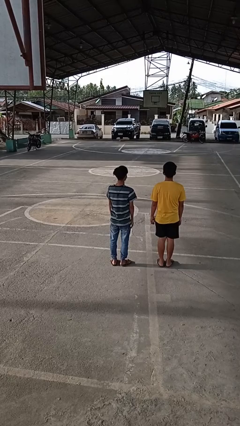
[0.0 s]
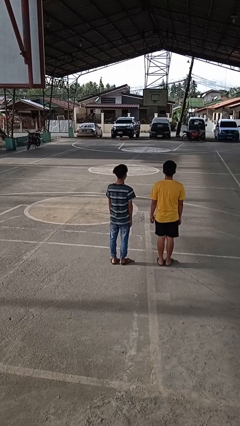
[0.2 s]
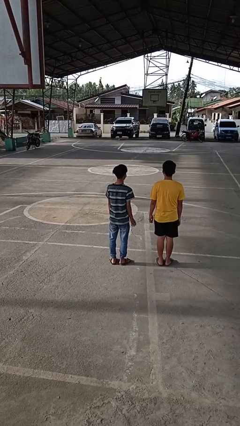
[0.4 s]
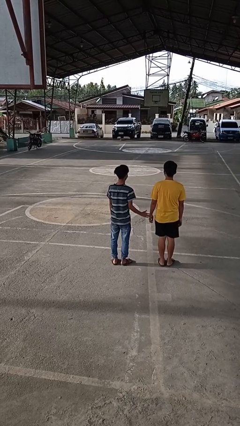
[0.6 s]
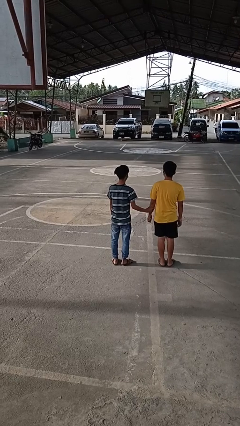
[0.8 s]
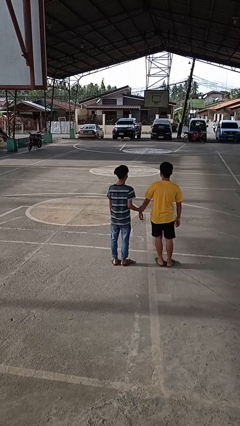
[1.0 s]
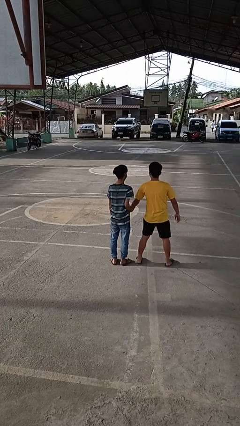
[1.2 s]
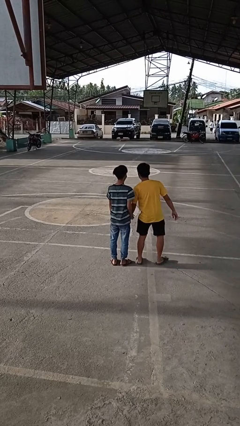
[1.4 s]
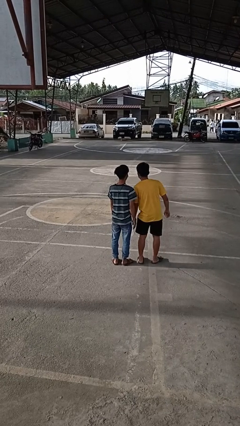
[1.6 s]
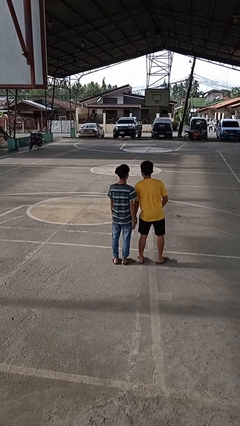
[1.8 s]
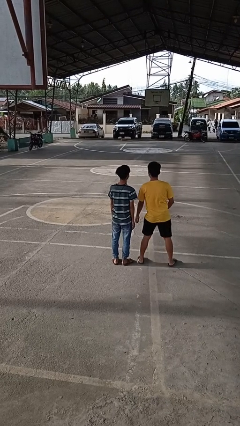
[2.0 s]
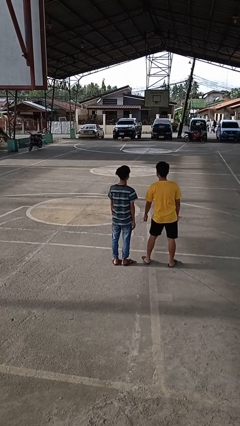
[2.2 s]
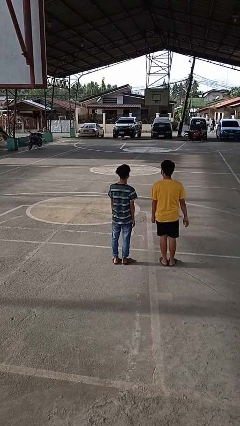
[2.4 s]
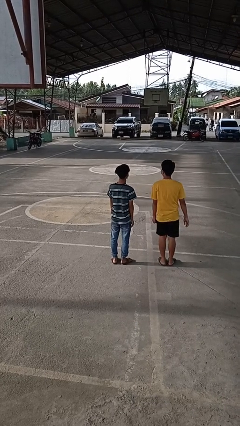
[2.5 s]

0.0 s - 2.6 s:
person grabs person by forearm

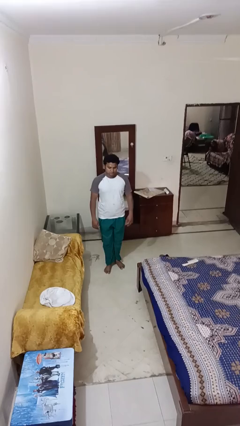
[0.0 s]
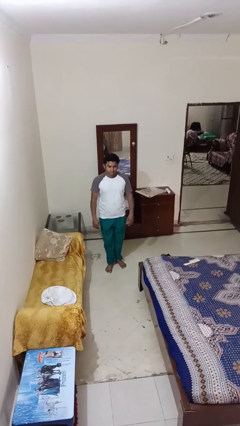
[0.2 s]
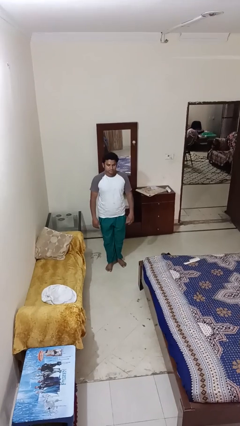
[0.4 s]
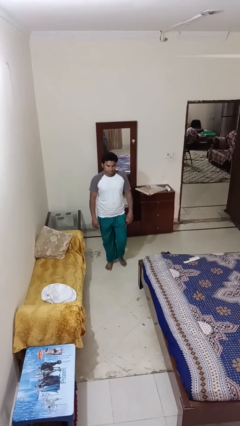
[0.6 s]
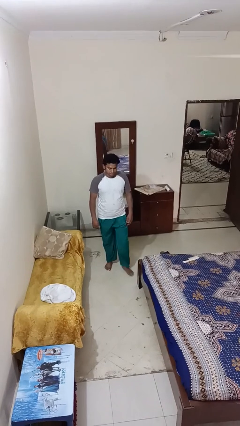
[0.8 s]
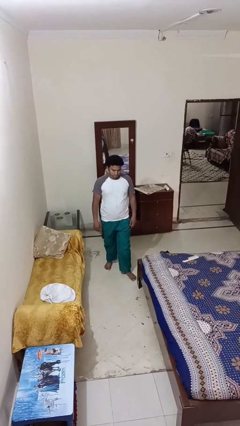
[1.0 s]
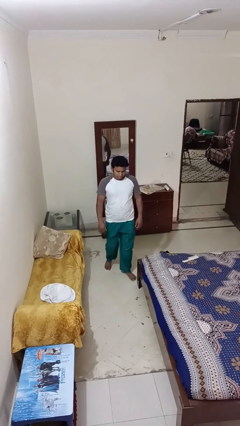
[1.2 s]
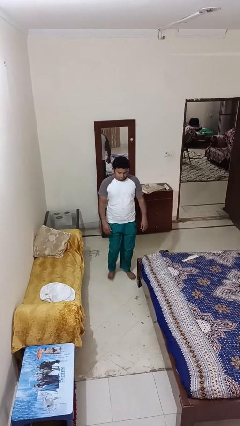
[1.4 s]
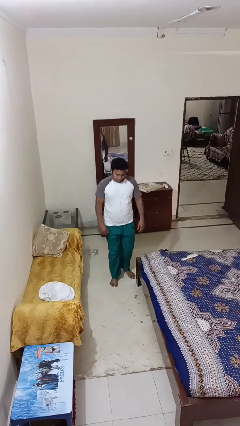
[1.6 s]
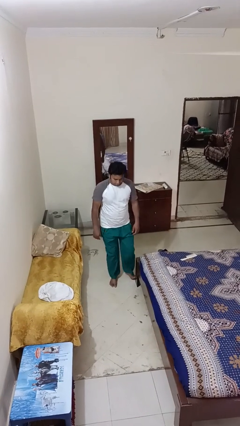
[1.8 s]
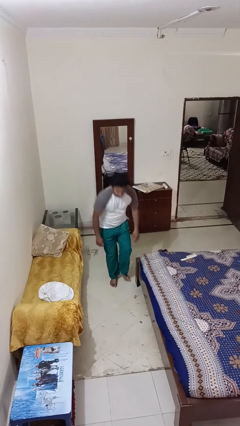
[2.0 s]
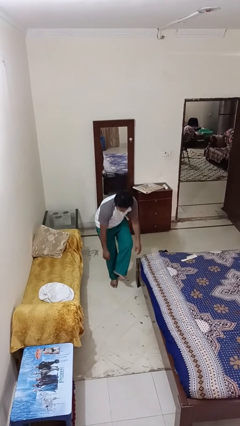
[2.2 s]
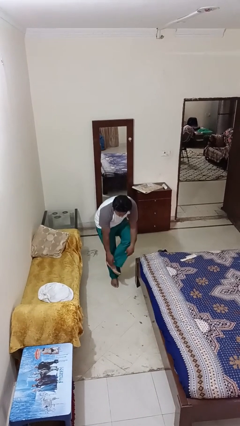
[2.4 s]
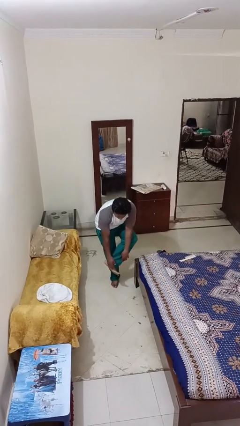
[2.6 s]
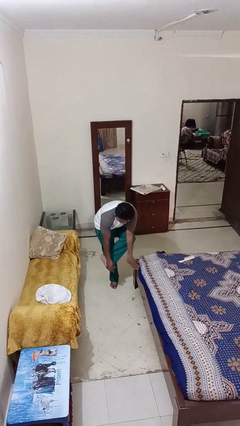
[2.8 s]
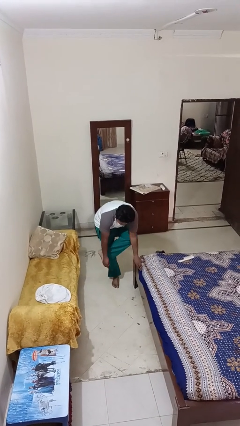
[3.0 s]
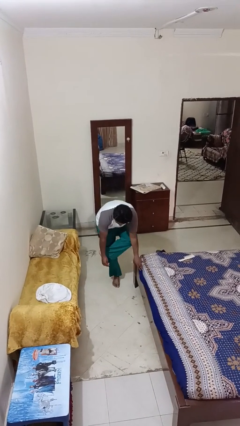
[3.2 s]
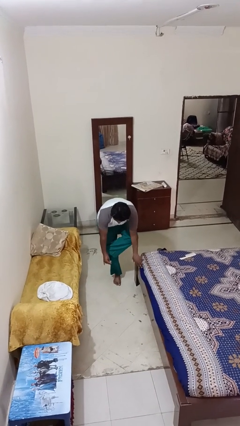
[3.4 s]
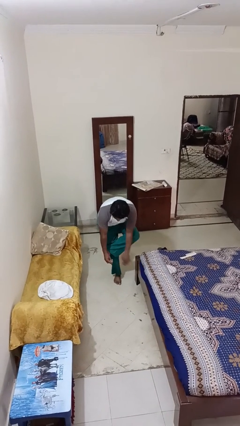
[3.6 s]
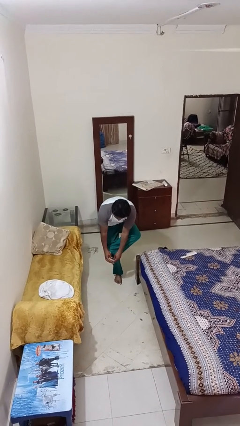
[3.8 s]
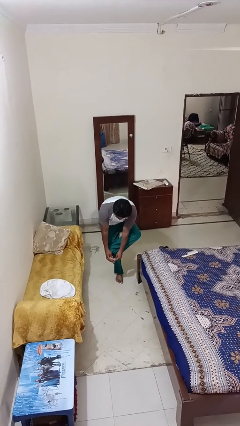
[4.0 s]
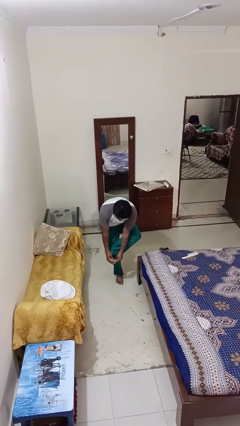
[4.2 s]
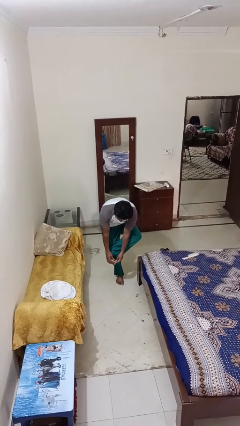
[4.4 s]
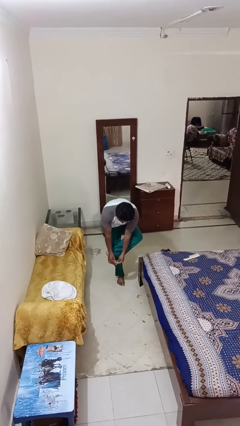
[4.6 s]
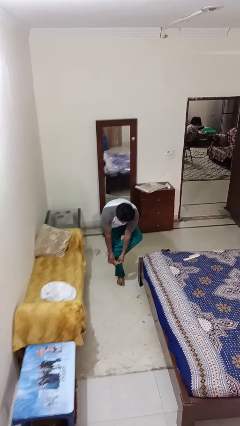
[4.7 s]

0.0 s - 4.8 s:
person stubs toe

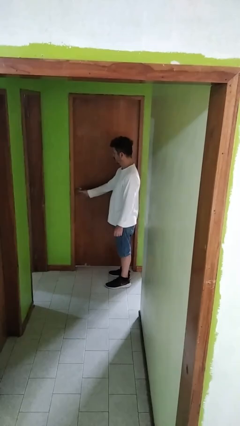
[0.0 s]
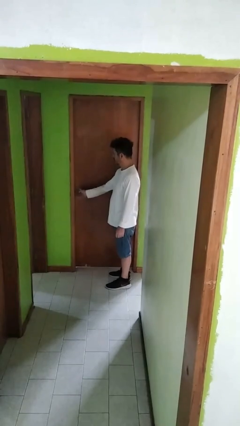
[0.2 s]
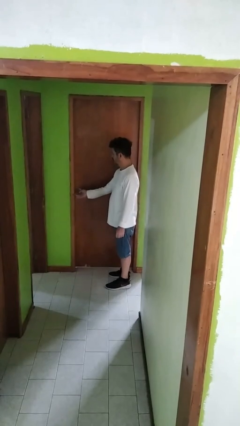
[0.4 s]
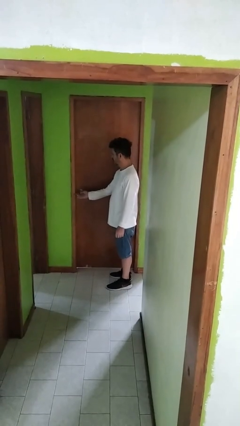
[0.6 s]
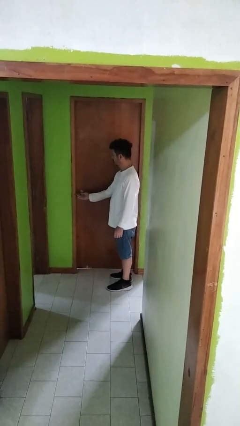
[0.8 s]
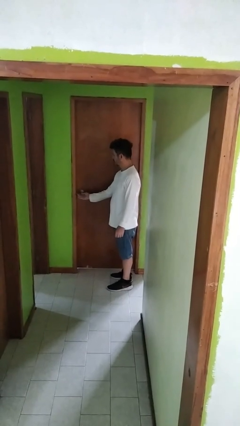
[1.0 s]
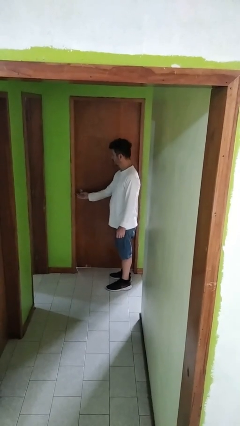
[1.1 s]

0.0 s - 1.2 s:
person unlocks door with keys

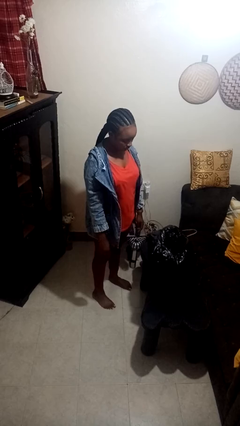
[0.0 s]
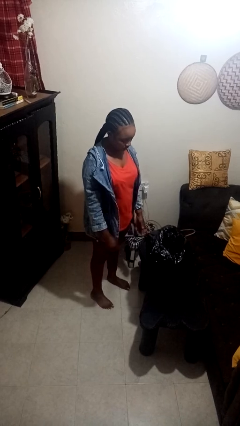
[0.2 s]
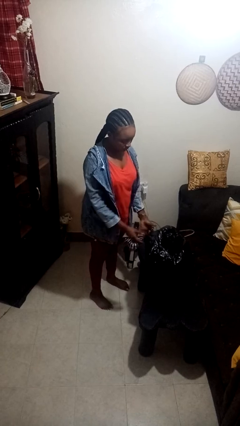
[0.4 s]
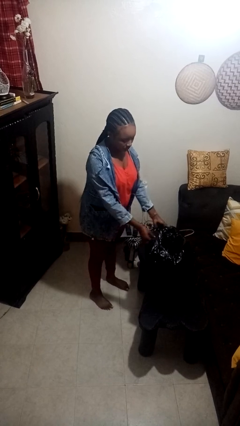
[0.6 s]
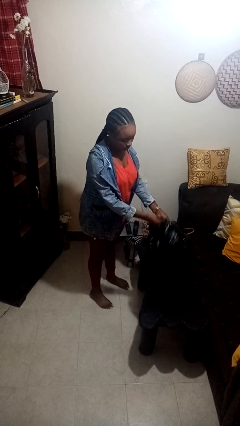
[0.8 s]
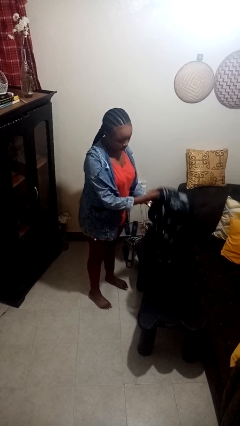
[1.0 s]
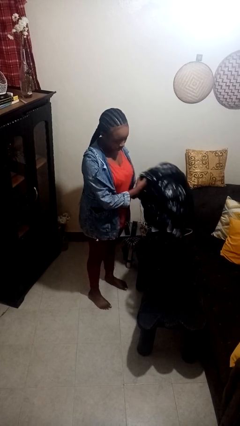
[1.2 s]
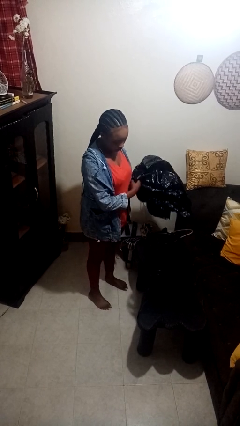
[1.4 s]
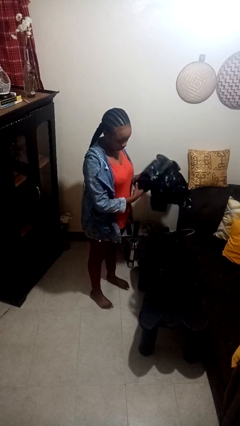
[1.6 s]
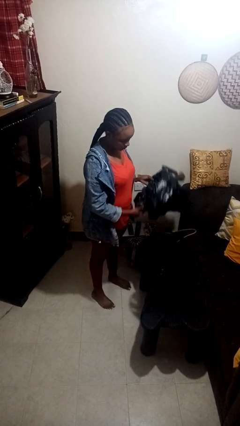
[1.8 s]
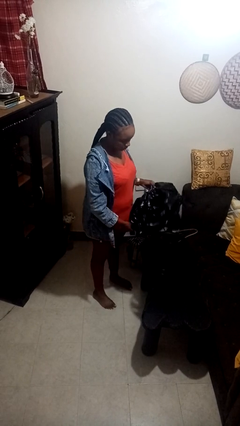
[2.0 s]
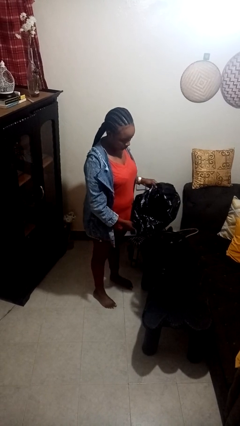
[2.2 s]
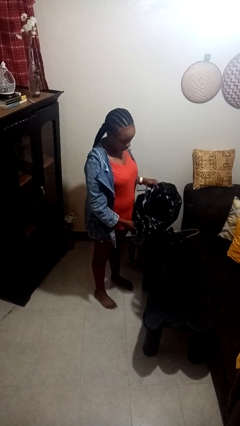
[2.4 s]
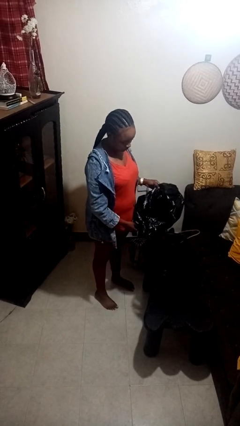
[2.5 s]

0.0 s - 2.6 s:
person removes trashbag from trashcan

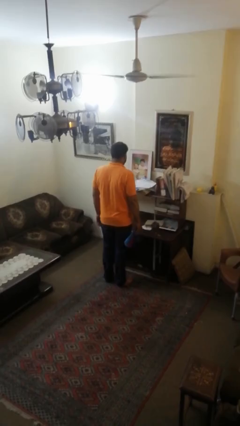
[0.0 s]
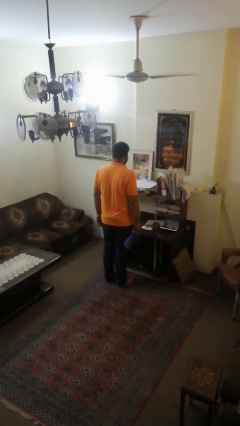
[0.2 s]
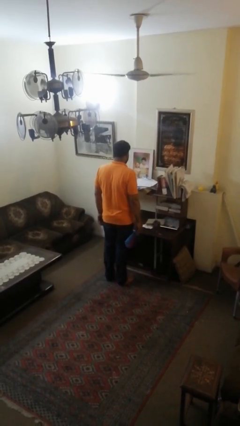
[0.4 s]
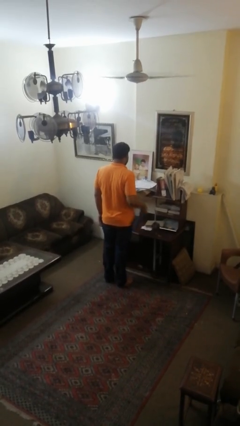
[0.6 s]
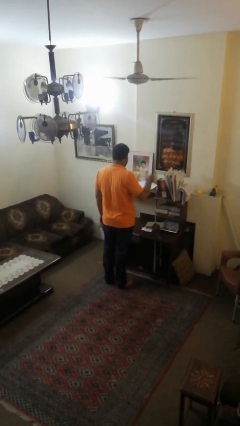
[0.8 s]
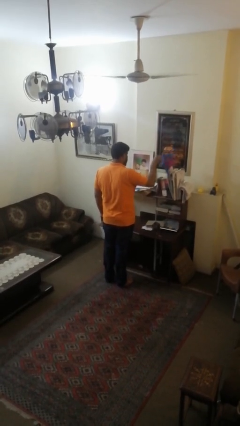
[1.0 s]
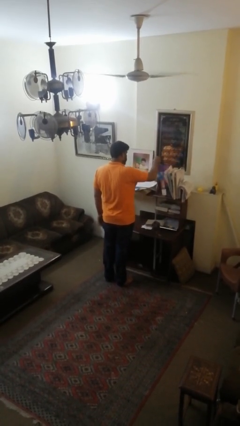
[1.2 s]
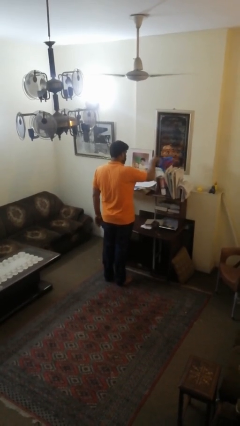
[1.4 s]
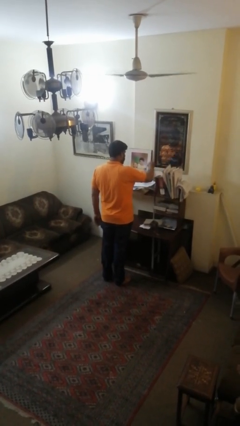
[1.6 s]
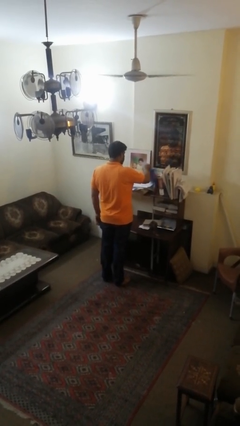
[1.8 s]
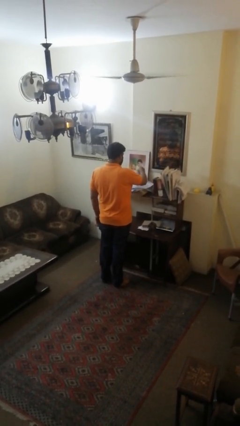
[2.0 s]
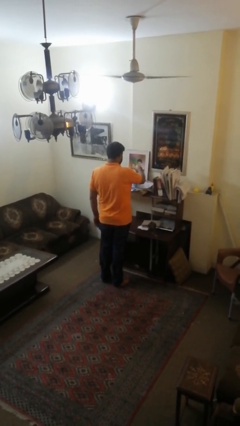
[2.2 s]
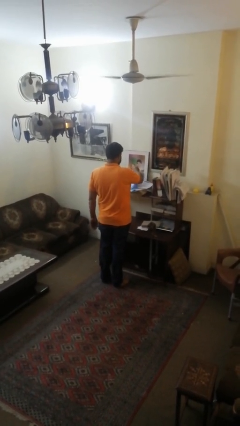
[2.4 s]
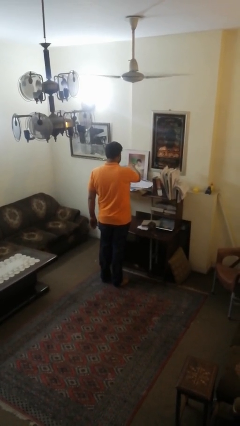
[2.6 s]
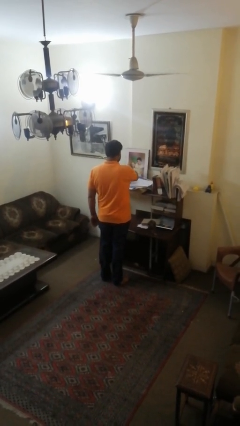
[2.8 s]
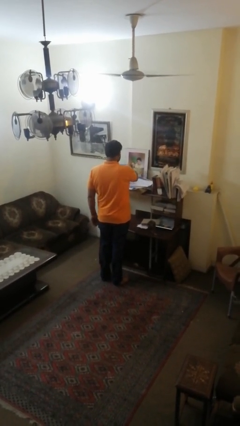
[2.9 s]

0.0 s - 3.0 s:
person dusts furniture

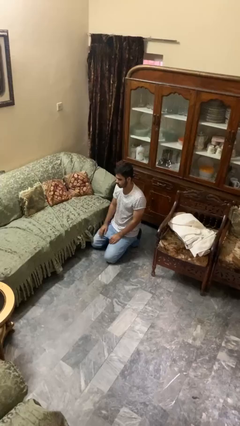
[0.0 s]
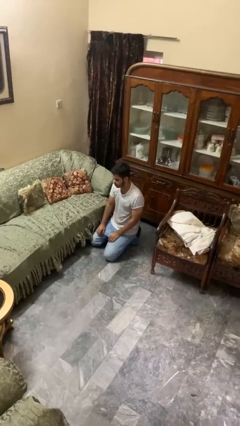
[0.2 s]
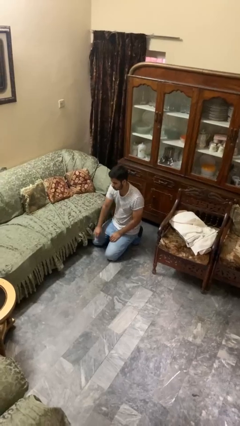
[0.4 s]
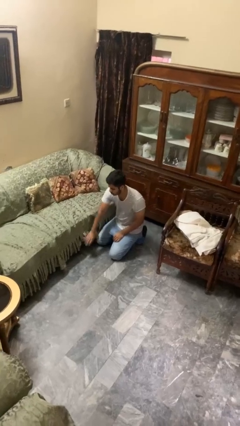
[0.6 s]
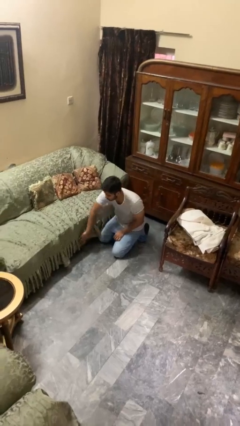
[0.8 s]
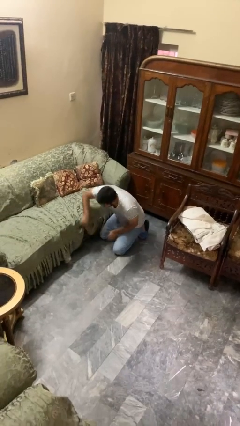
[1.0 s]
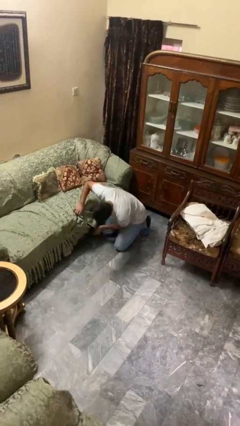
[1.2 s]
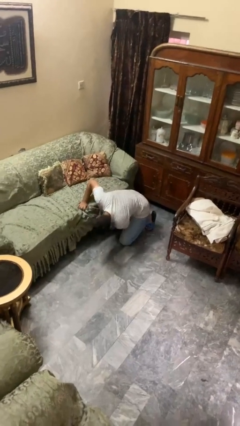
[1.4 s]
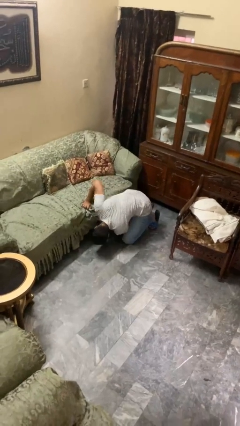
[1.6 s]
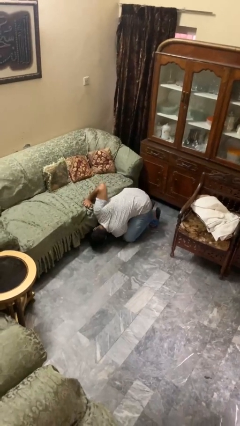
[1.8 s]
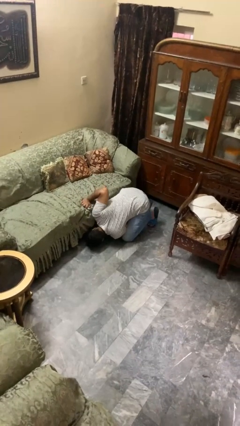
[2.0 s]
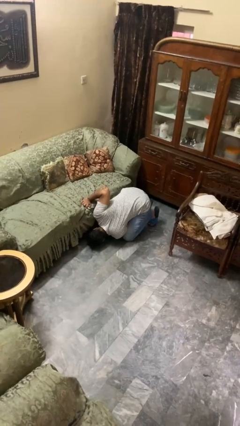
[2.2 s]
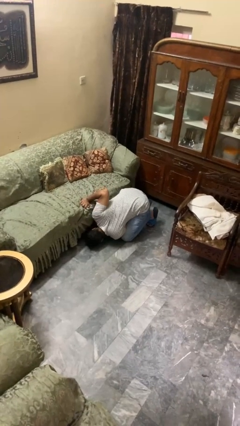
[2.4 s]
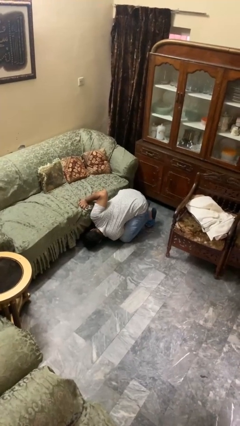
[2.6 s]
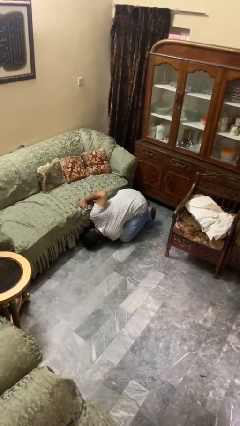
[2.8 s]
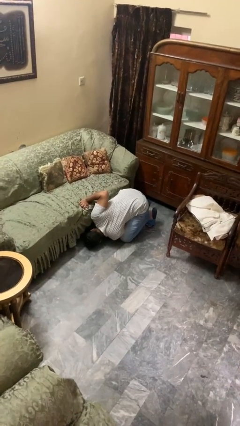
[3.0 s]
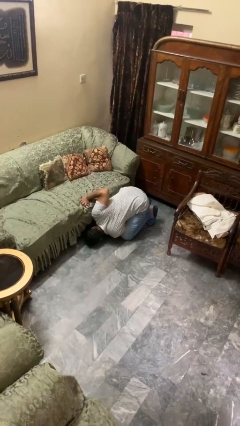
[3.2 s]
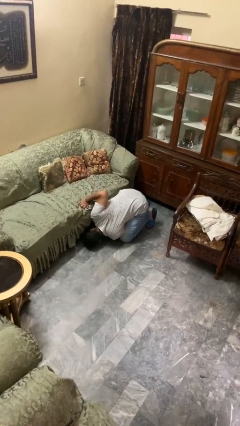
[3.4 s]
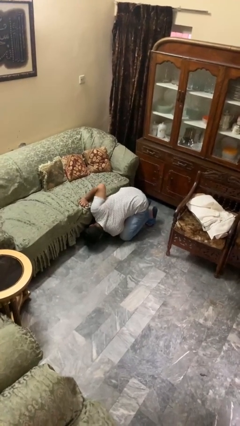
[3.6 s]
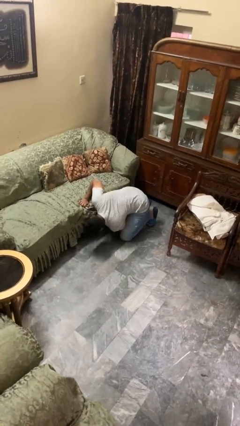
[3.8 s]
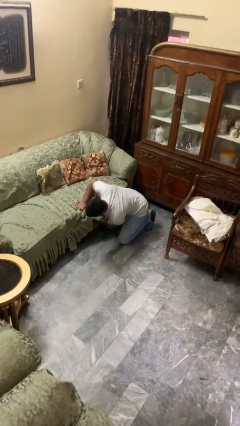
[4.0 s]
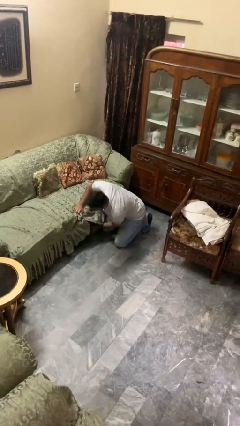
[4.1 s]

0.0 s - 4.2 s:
person searches under couch
